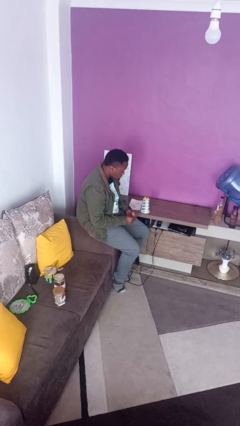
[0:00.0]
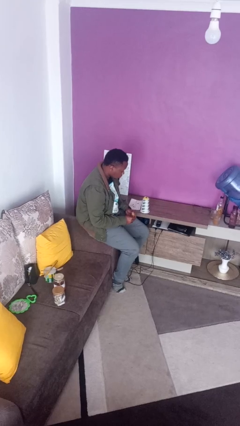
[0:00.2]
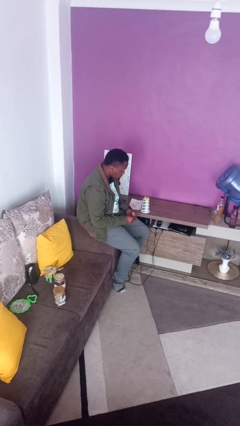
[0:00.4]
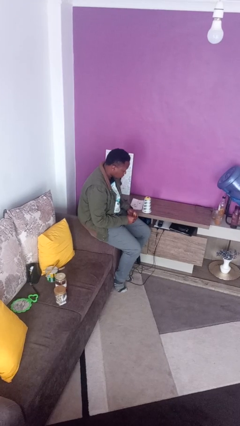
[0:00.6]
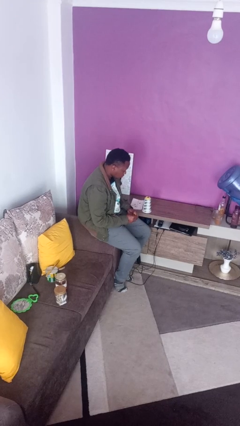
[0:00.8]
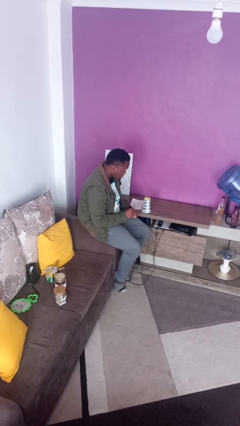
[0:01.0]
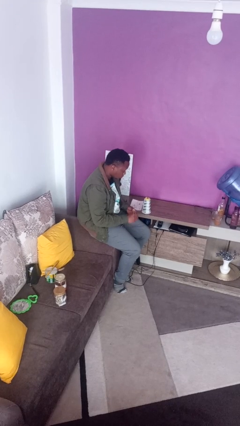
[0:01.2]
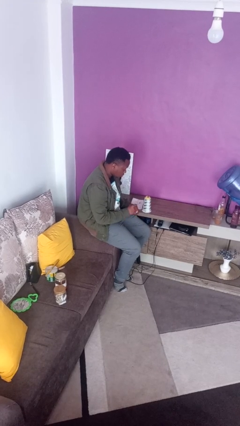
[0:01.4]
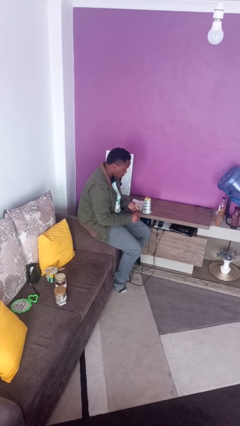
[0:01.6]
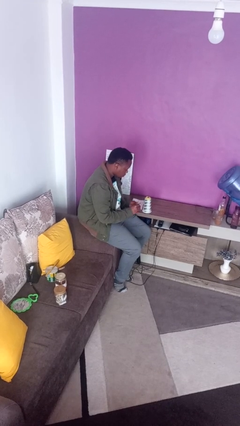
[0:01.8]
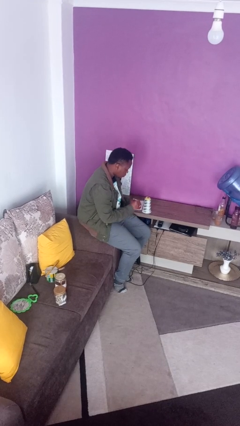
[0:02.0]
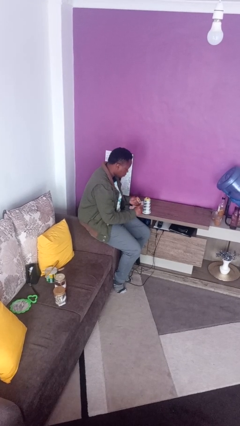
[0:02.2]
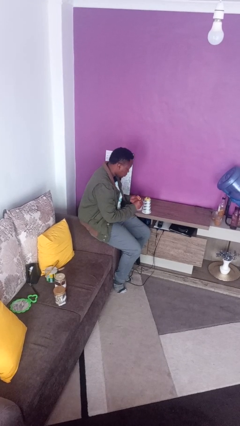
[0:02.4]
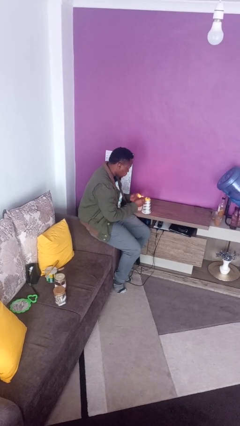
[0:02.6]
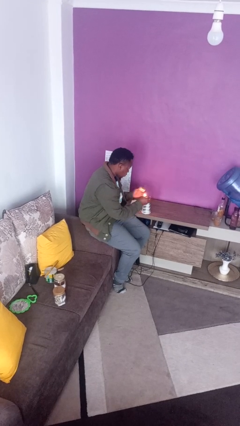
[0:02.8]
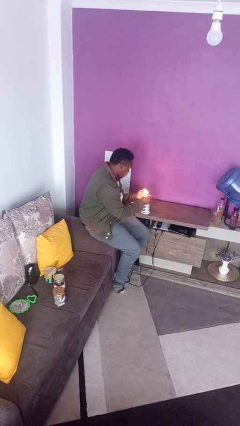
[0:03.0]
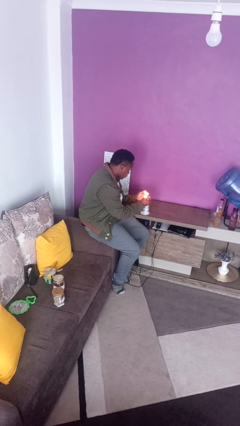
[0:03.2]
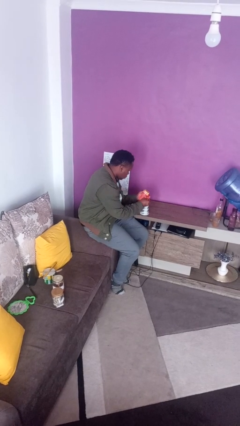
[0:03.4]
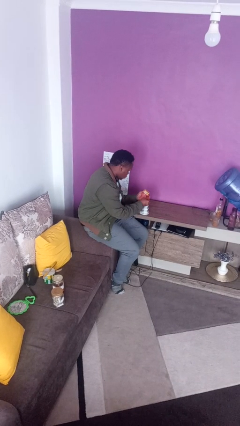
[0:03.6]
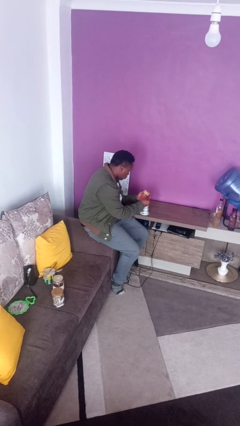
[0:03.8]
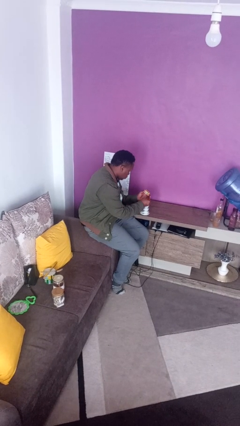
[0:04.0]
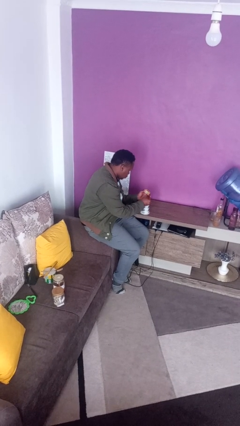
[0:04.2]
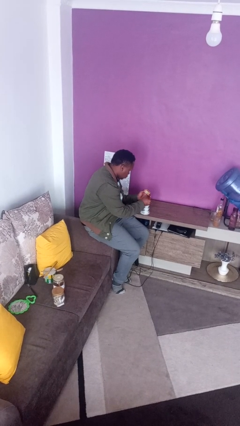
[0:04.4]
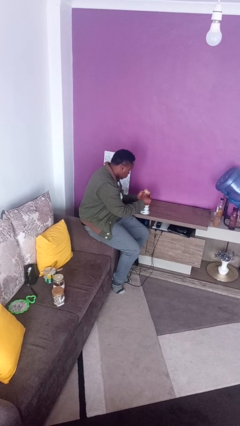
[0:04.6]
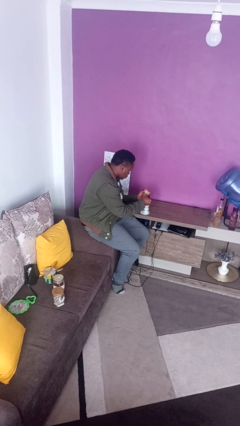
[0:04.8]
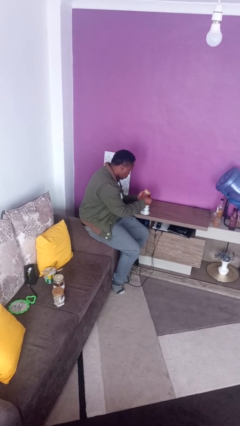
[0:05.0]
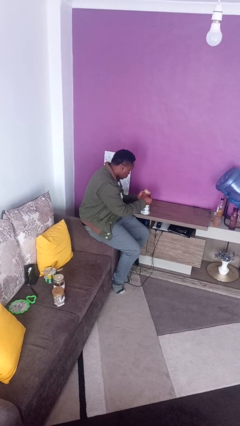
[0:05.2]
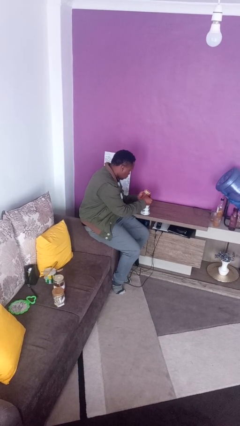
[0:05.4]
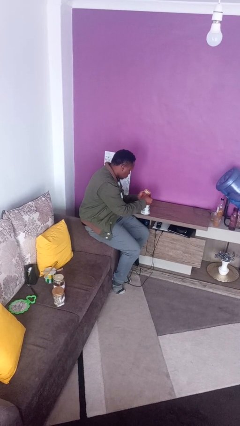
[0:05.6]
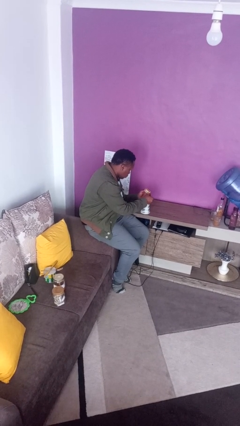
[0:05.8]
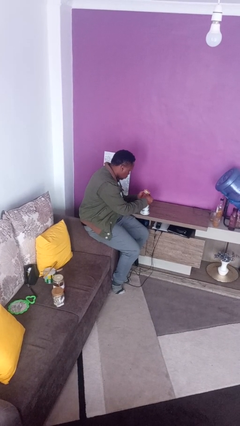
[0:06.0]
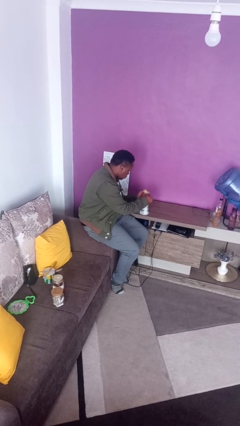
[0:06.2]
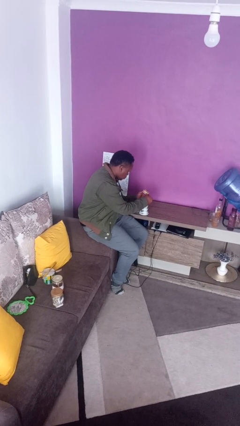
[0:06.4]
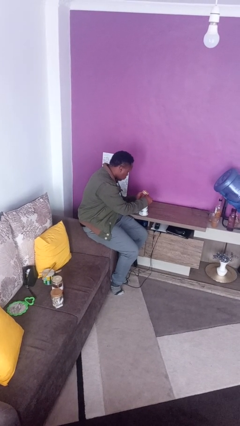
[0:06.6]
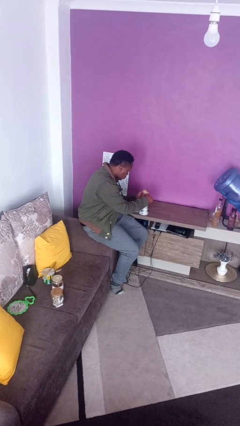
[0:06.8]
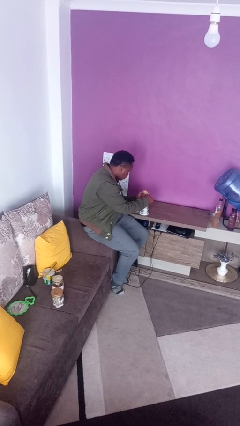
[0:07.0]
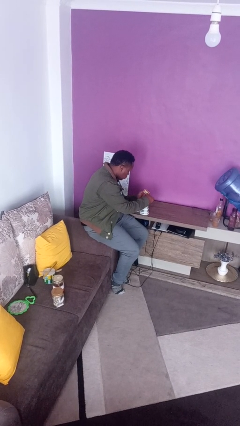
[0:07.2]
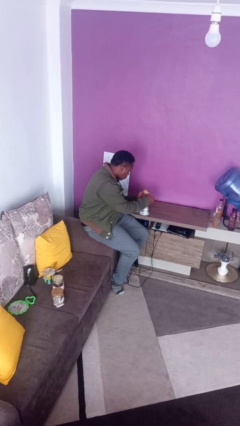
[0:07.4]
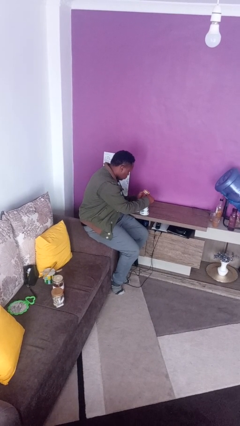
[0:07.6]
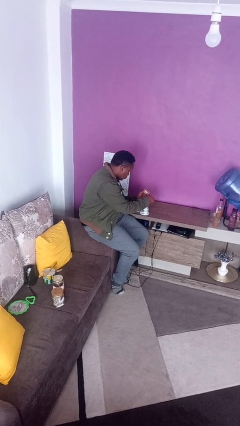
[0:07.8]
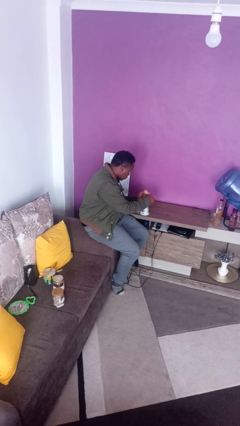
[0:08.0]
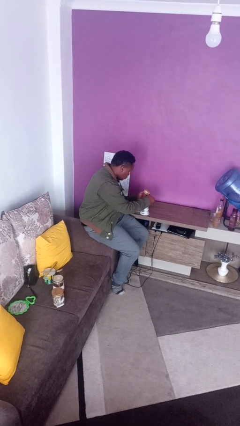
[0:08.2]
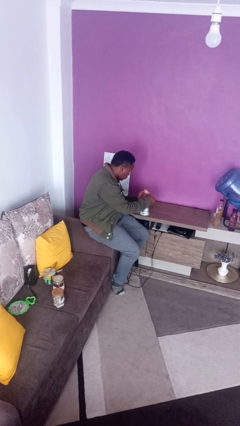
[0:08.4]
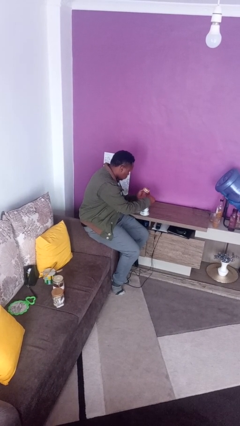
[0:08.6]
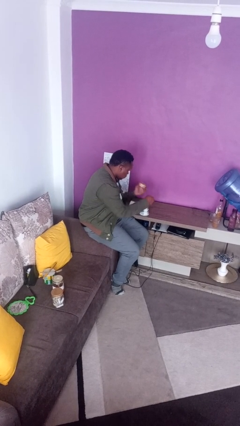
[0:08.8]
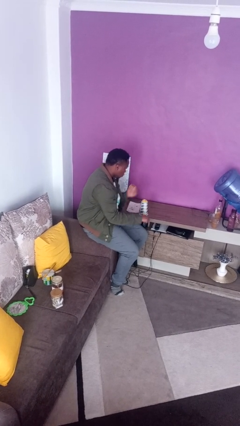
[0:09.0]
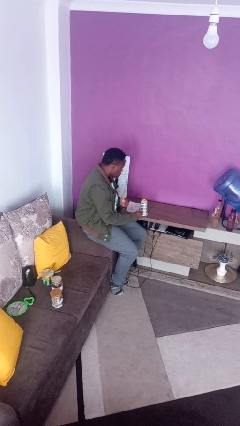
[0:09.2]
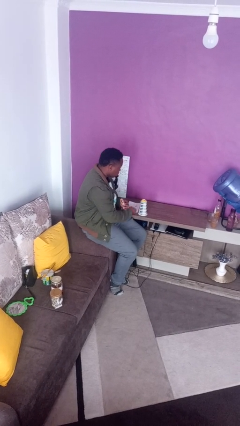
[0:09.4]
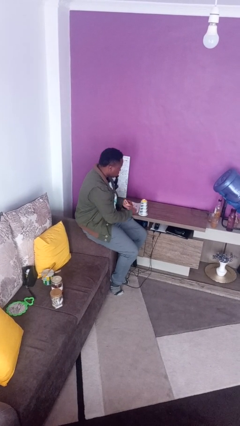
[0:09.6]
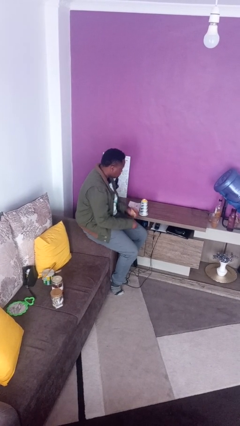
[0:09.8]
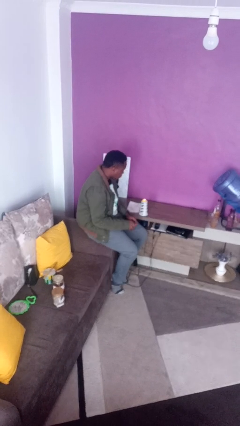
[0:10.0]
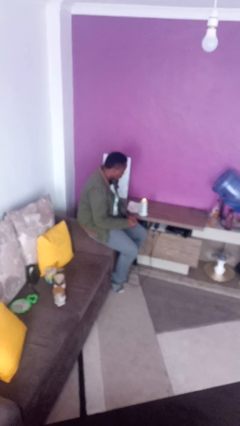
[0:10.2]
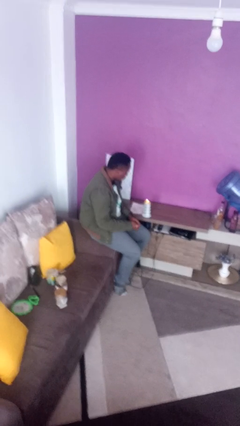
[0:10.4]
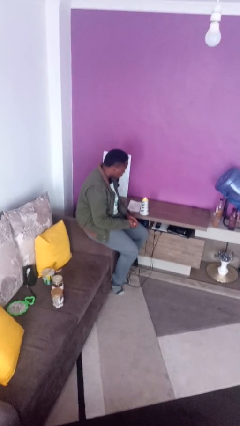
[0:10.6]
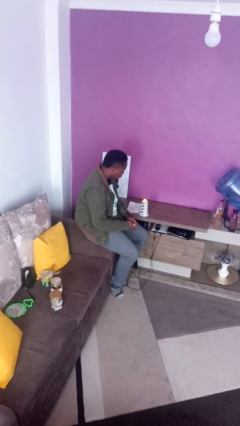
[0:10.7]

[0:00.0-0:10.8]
person lights candle

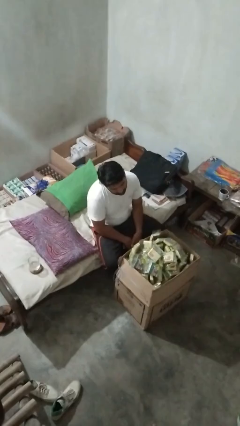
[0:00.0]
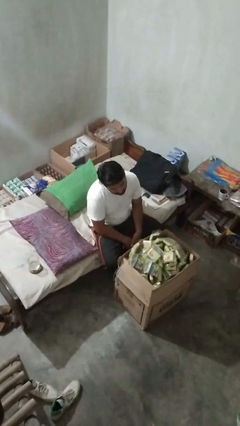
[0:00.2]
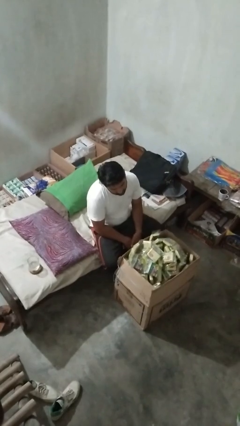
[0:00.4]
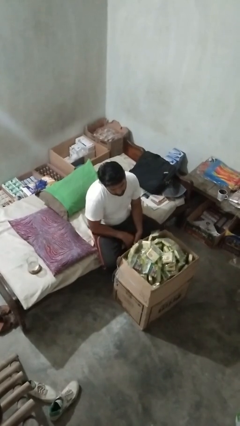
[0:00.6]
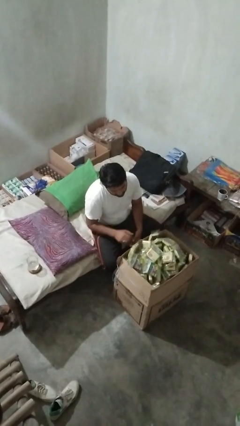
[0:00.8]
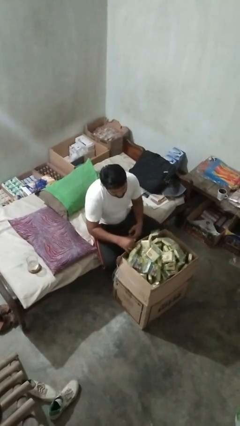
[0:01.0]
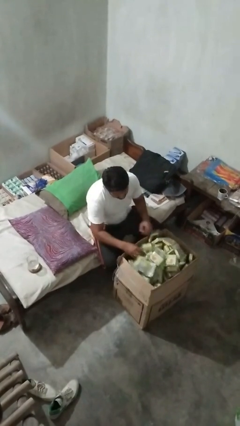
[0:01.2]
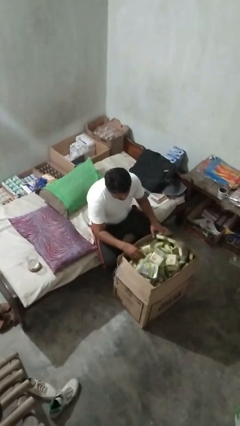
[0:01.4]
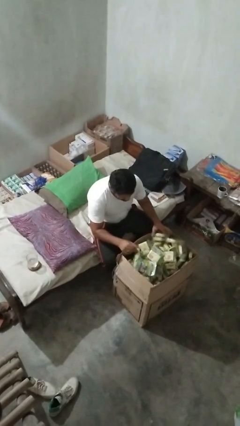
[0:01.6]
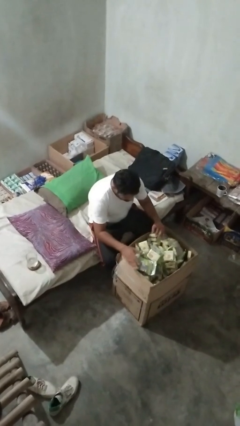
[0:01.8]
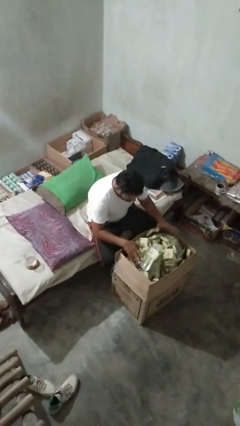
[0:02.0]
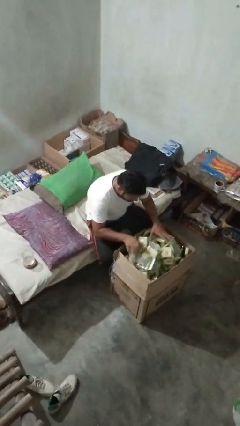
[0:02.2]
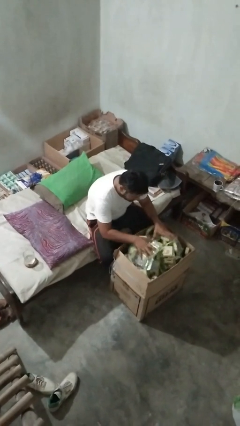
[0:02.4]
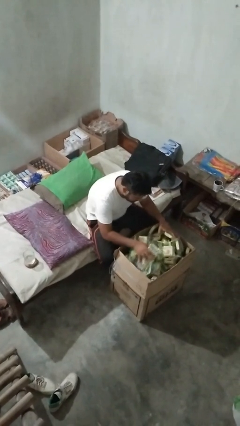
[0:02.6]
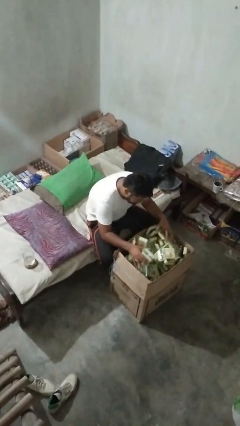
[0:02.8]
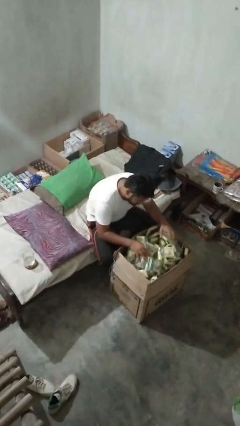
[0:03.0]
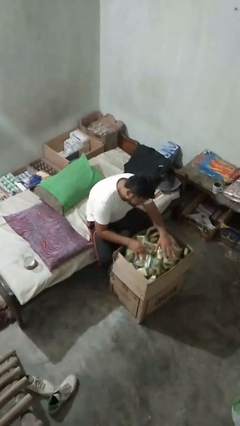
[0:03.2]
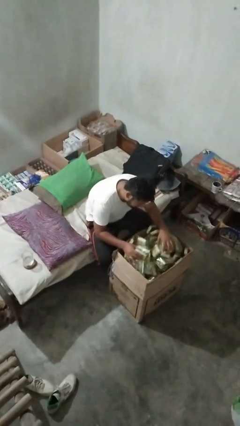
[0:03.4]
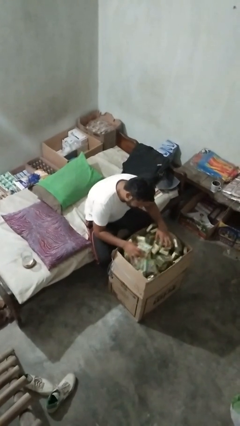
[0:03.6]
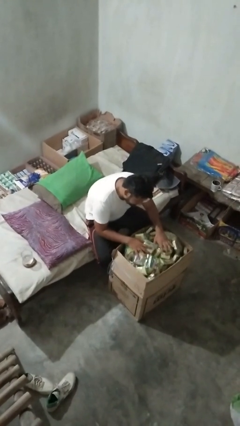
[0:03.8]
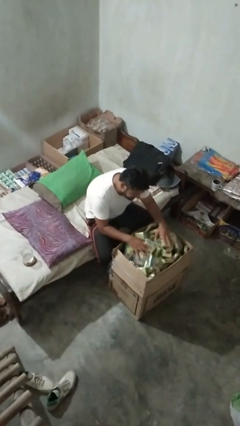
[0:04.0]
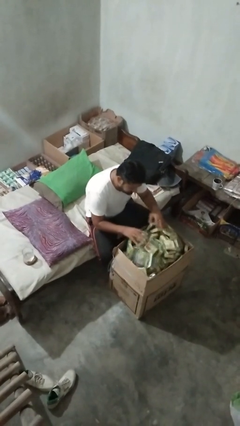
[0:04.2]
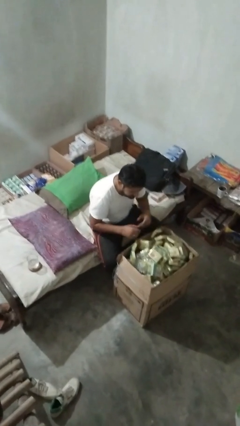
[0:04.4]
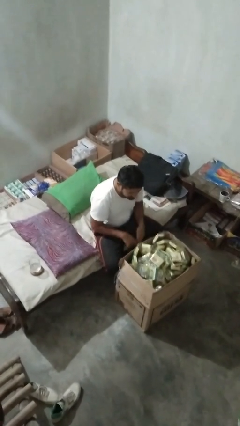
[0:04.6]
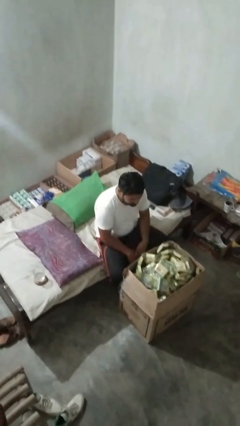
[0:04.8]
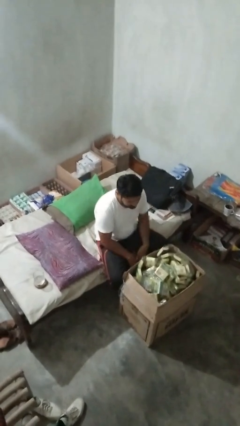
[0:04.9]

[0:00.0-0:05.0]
person searches in box

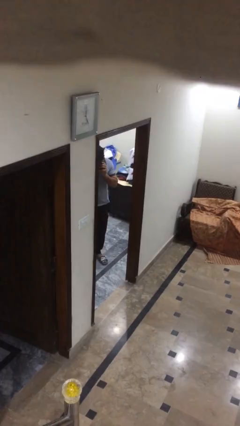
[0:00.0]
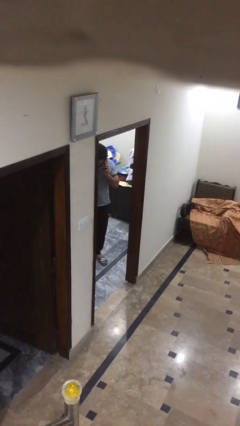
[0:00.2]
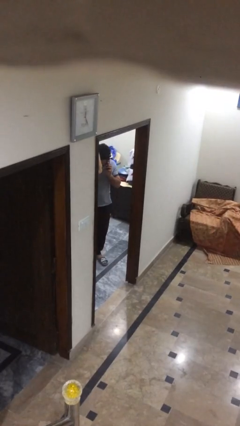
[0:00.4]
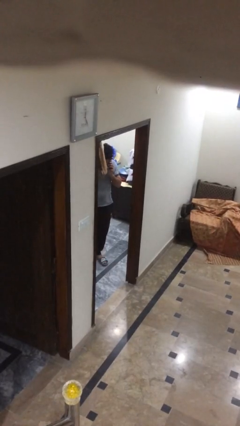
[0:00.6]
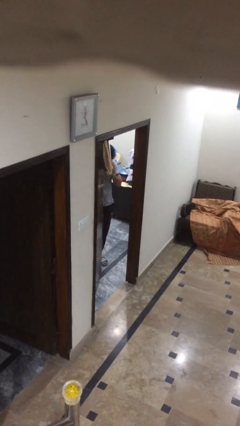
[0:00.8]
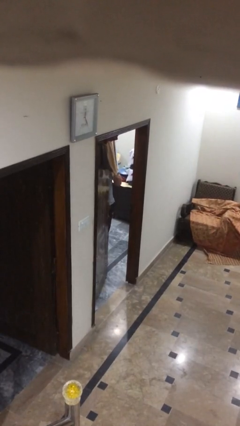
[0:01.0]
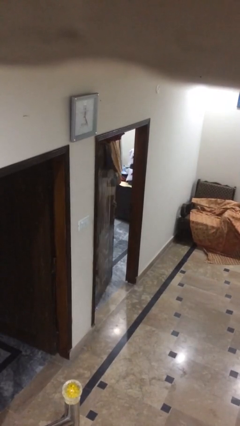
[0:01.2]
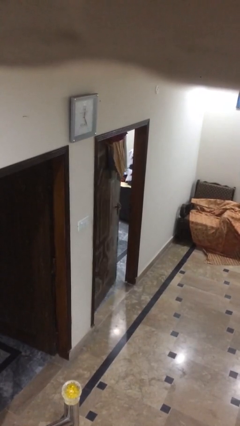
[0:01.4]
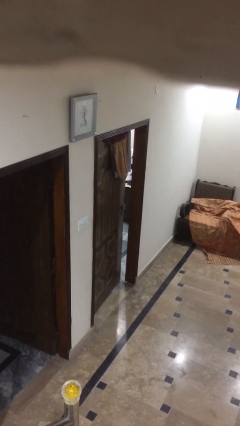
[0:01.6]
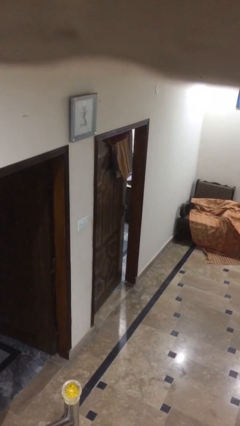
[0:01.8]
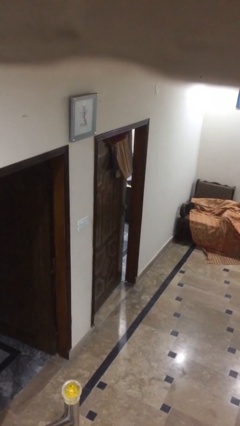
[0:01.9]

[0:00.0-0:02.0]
person closes facility door
